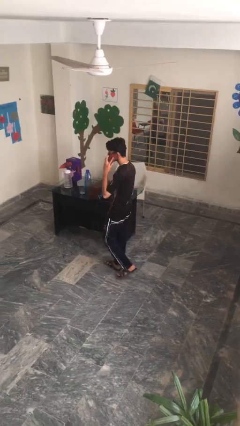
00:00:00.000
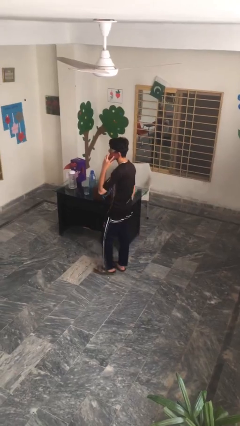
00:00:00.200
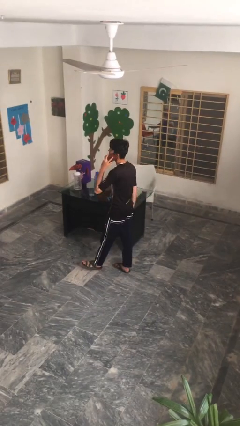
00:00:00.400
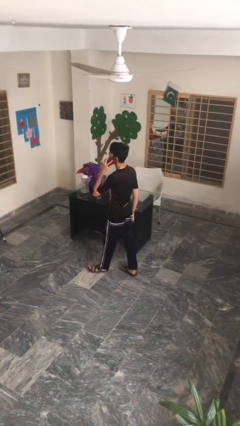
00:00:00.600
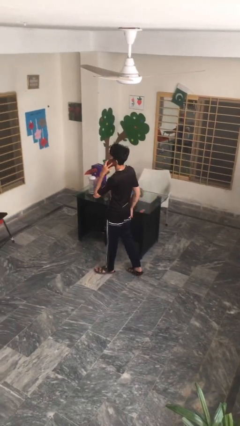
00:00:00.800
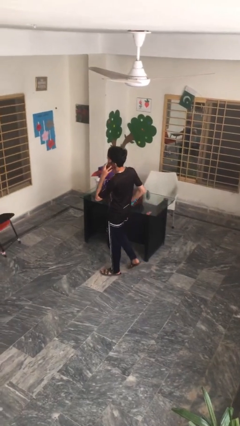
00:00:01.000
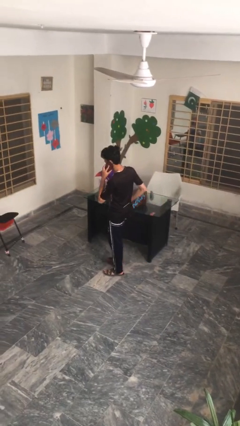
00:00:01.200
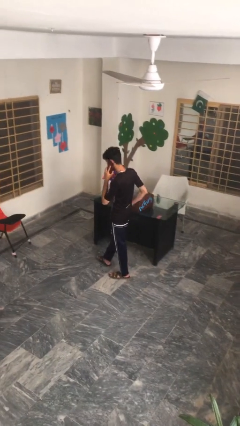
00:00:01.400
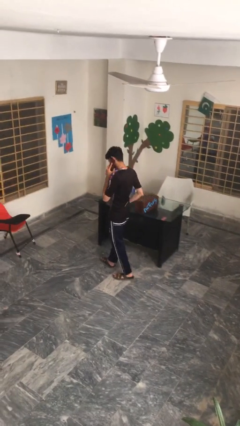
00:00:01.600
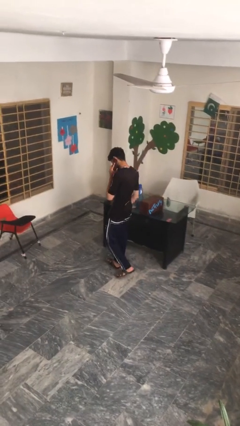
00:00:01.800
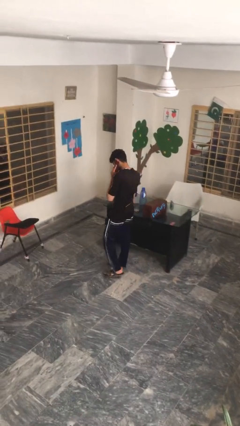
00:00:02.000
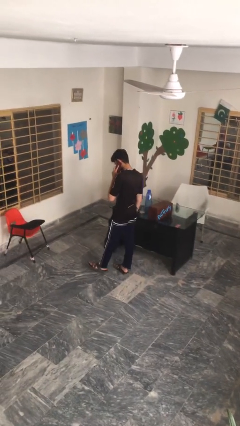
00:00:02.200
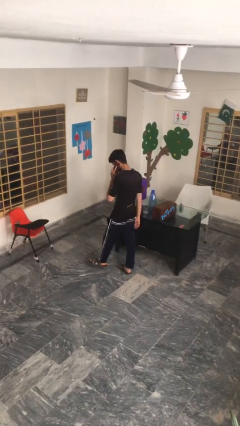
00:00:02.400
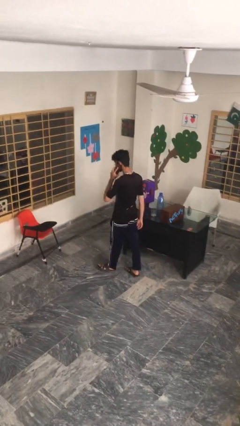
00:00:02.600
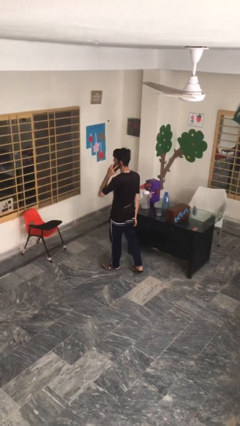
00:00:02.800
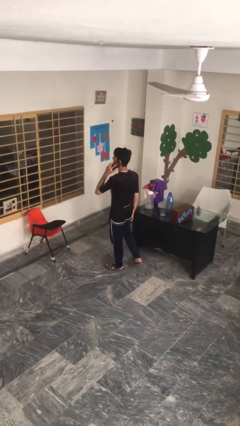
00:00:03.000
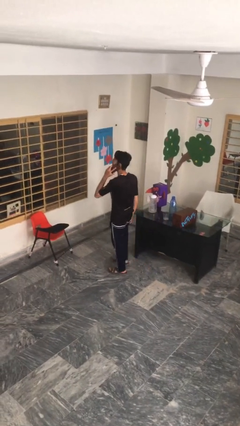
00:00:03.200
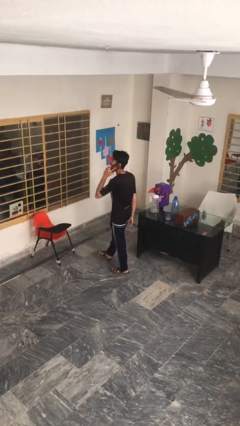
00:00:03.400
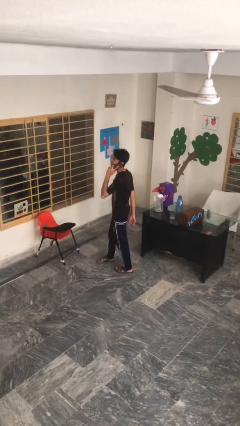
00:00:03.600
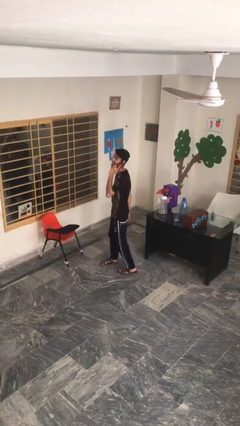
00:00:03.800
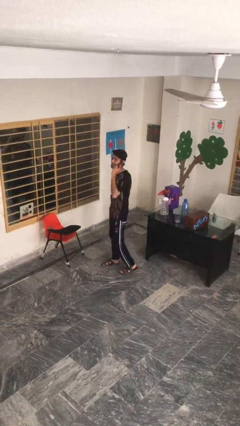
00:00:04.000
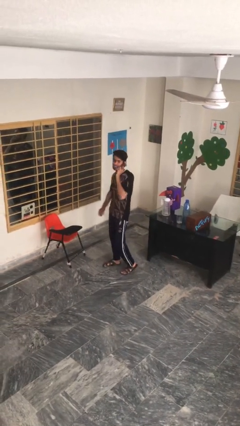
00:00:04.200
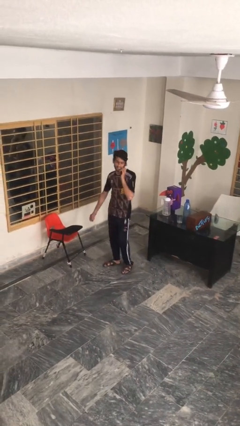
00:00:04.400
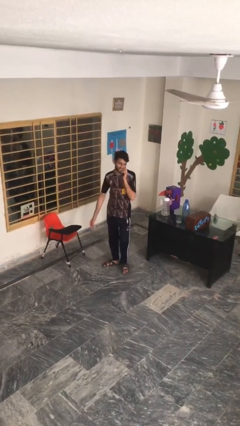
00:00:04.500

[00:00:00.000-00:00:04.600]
person talks on phone

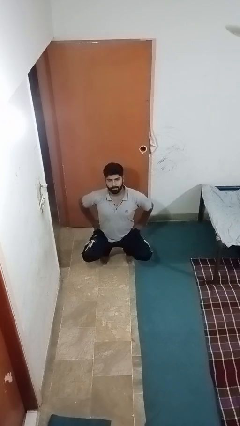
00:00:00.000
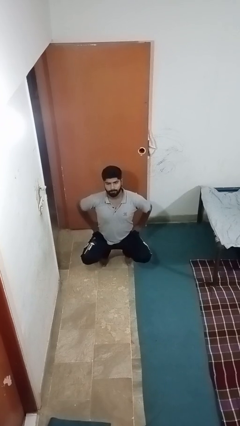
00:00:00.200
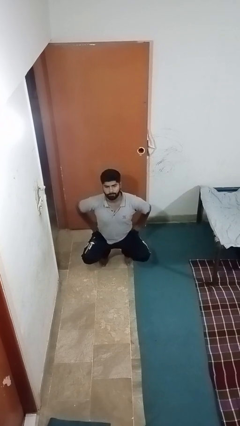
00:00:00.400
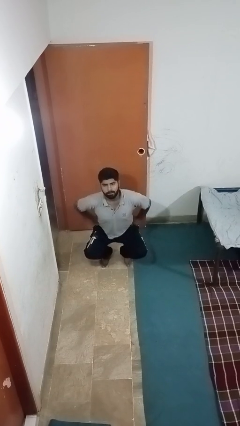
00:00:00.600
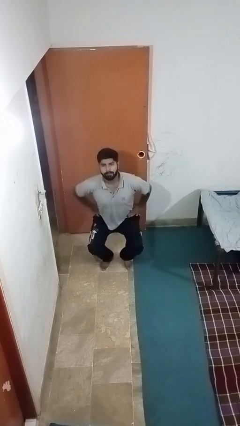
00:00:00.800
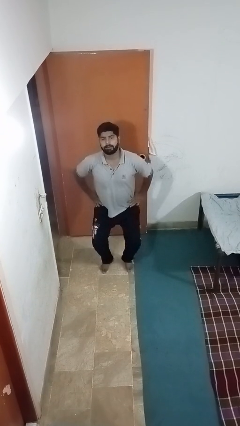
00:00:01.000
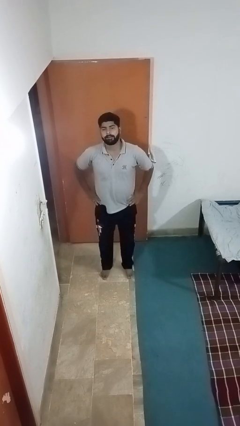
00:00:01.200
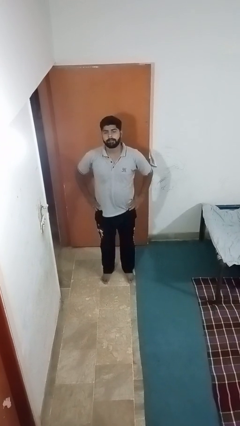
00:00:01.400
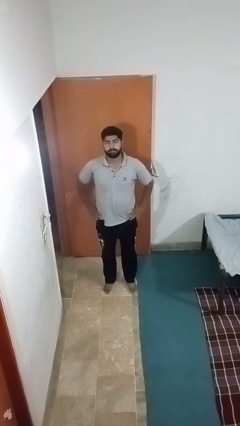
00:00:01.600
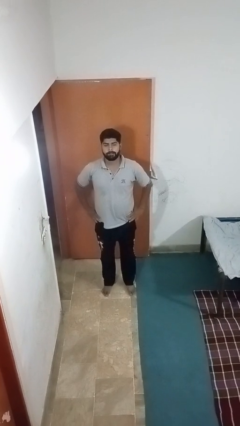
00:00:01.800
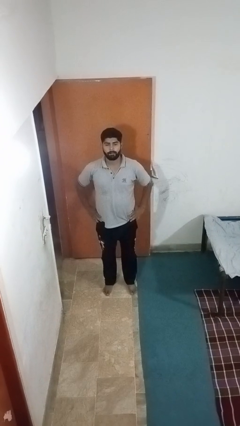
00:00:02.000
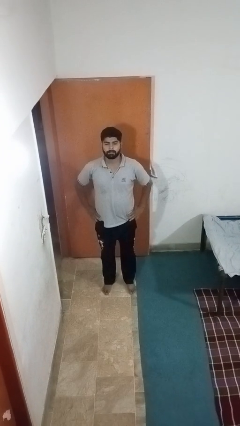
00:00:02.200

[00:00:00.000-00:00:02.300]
person stands up

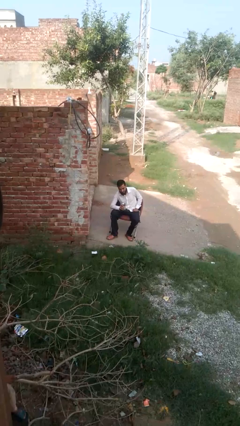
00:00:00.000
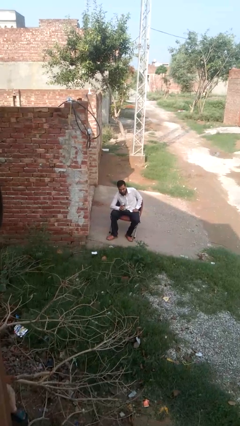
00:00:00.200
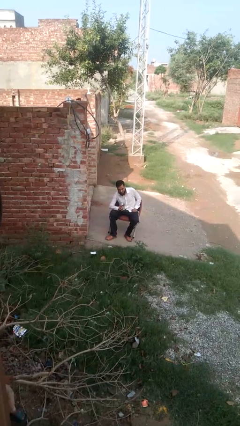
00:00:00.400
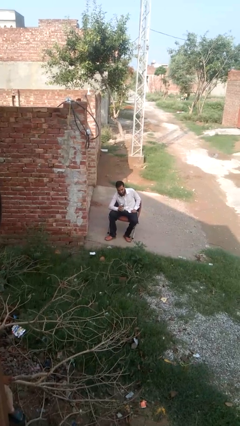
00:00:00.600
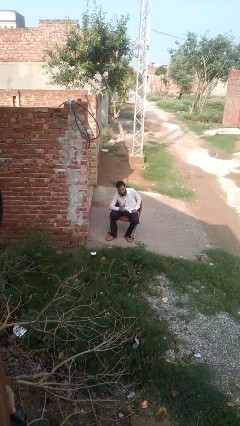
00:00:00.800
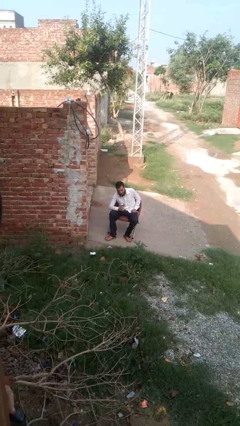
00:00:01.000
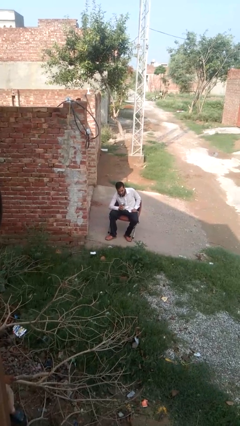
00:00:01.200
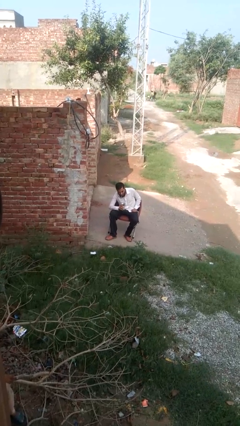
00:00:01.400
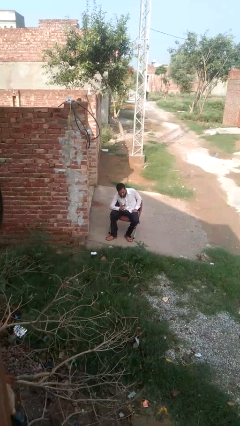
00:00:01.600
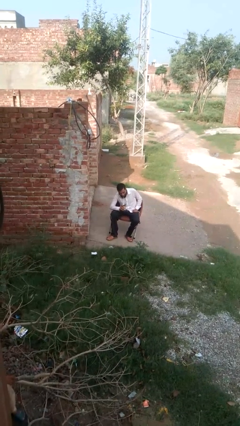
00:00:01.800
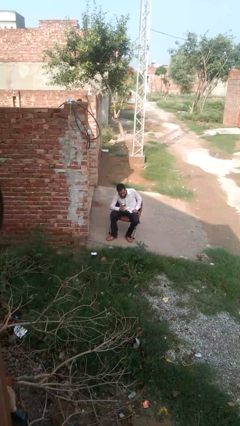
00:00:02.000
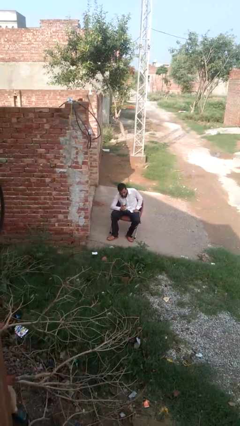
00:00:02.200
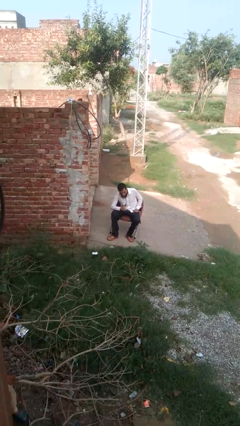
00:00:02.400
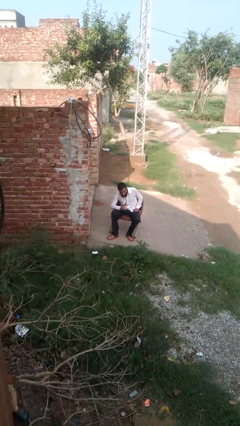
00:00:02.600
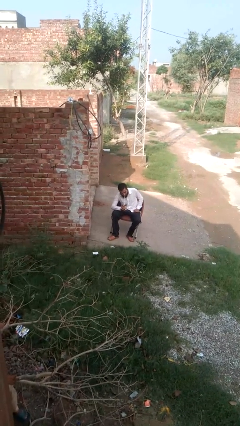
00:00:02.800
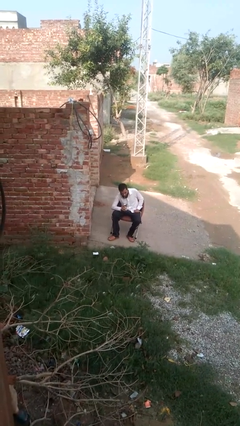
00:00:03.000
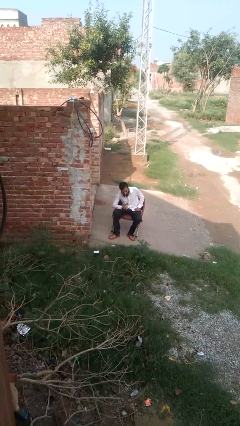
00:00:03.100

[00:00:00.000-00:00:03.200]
person drinks from straw

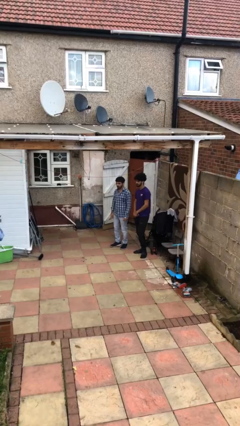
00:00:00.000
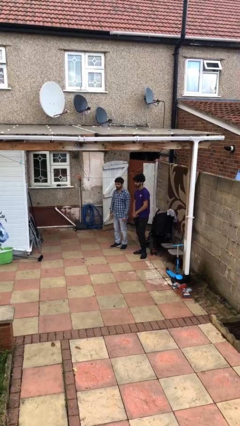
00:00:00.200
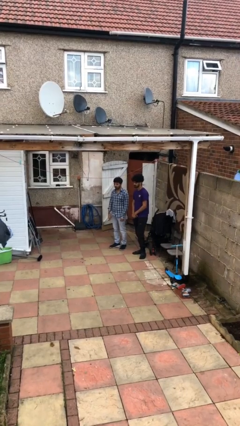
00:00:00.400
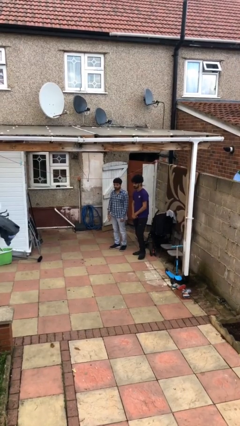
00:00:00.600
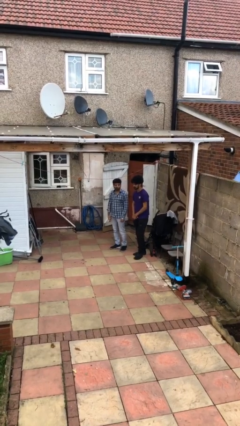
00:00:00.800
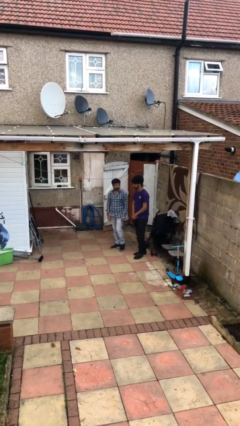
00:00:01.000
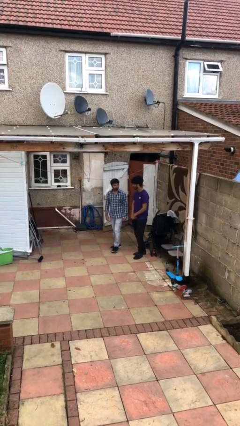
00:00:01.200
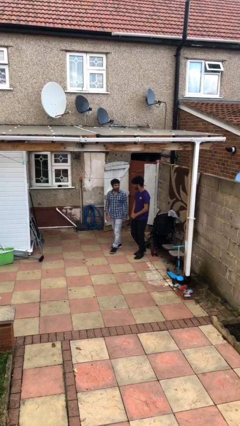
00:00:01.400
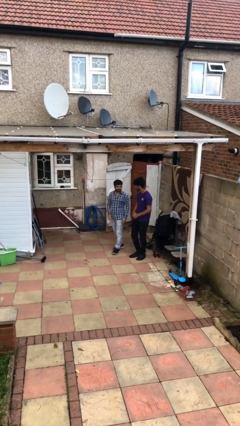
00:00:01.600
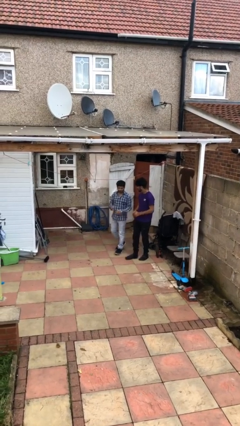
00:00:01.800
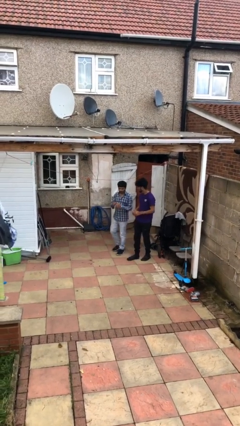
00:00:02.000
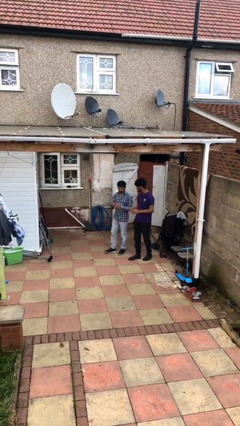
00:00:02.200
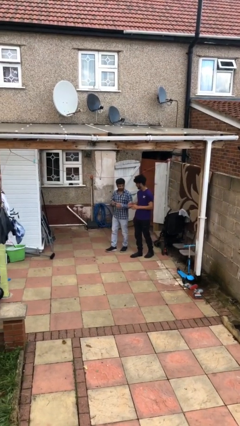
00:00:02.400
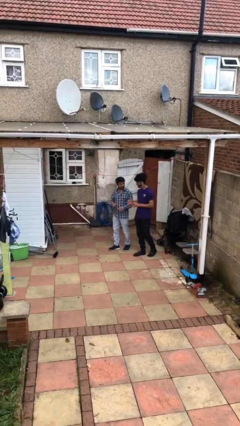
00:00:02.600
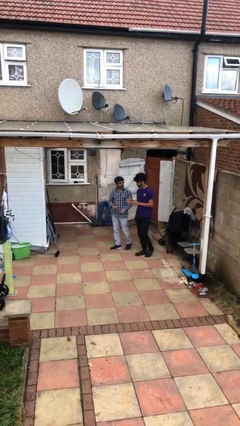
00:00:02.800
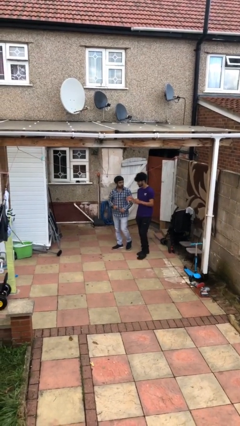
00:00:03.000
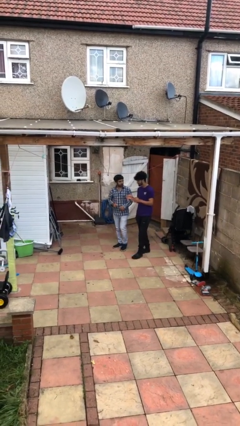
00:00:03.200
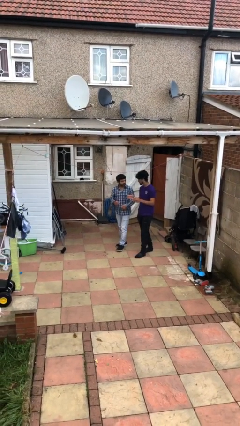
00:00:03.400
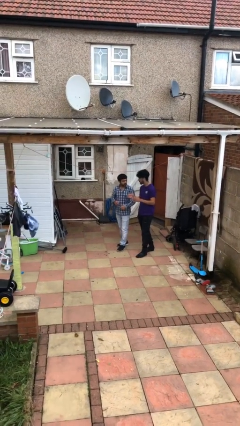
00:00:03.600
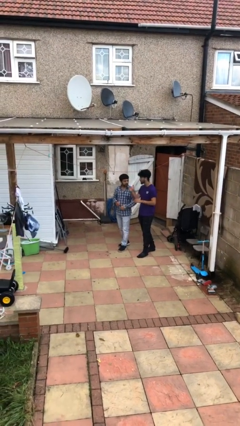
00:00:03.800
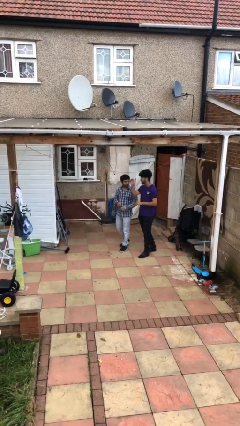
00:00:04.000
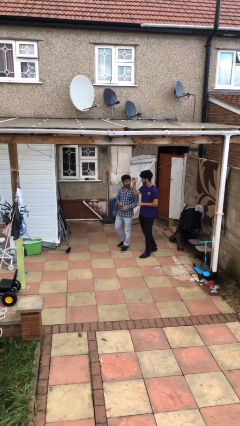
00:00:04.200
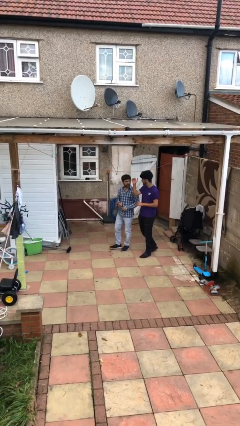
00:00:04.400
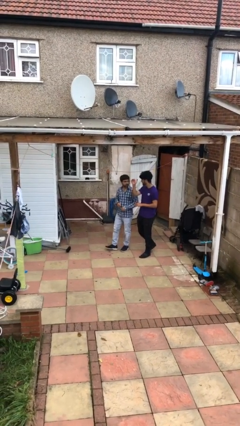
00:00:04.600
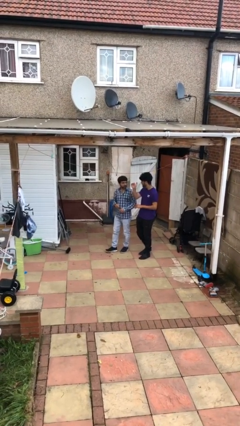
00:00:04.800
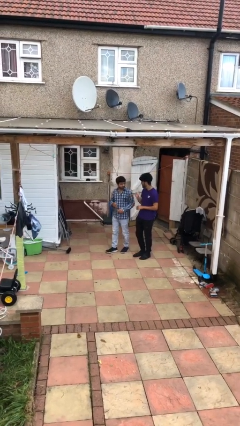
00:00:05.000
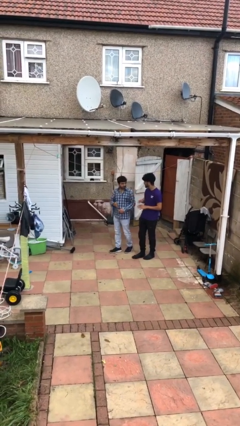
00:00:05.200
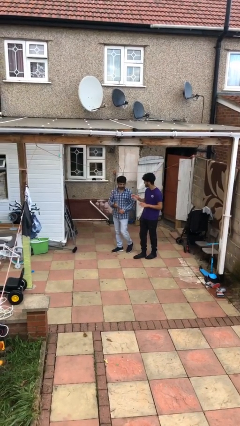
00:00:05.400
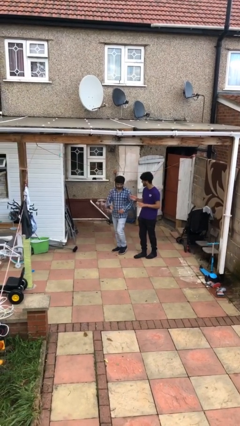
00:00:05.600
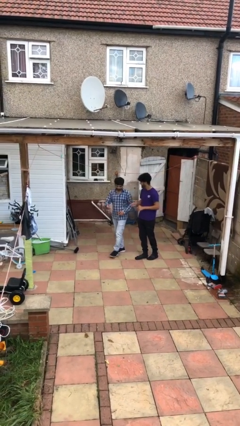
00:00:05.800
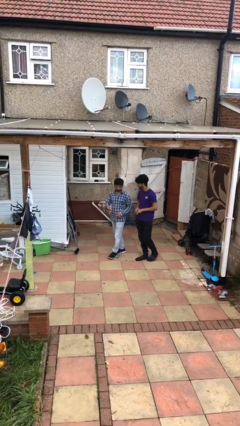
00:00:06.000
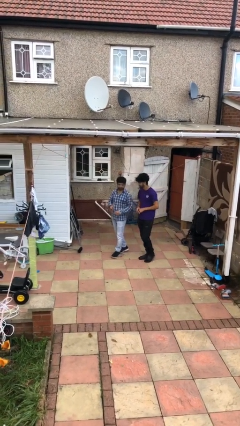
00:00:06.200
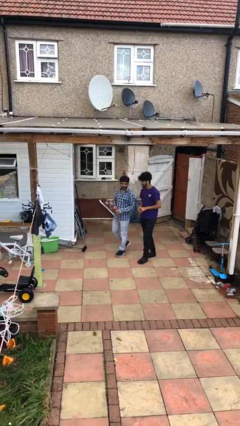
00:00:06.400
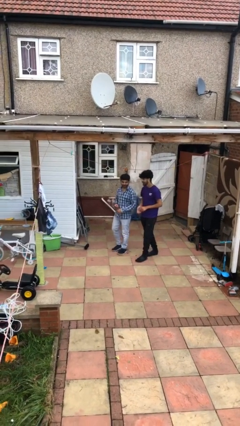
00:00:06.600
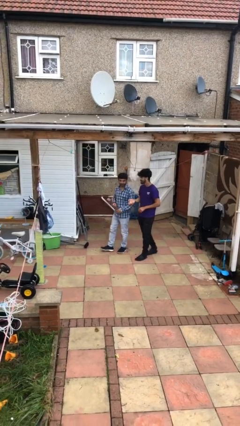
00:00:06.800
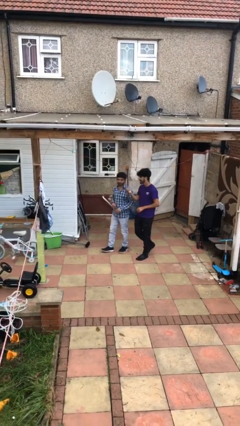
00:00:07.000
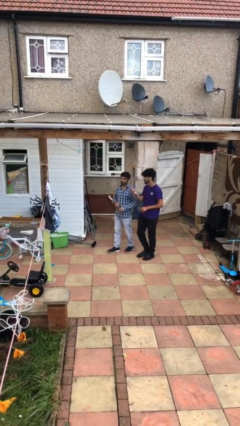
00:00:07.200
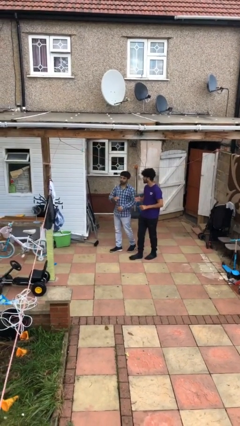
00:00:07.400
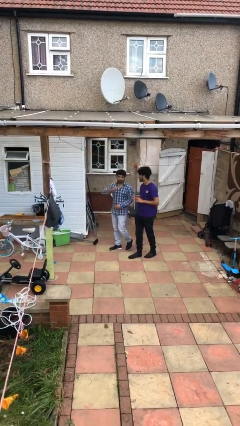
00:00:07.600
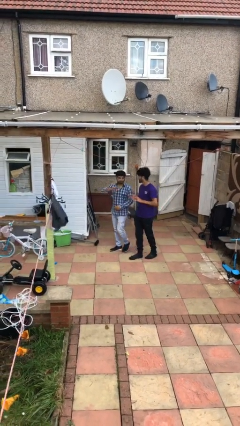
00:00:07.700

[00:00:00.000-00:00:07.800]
person talks to person
